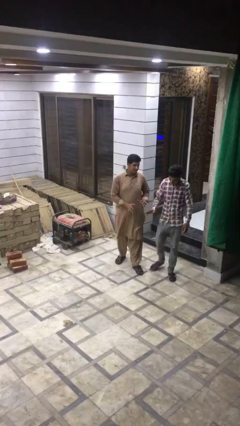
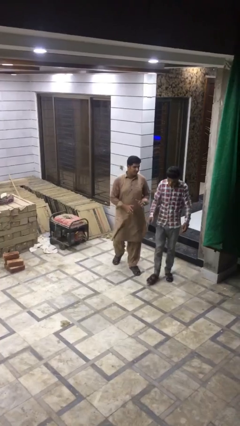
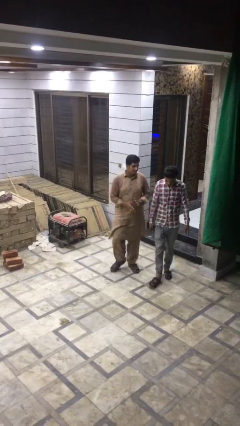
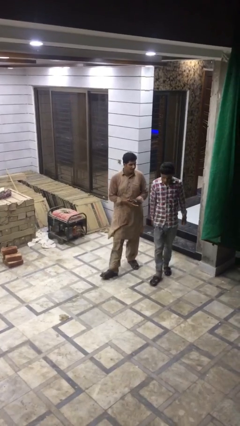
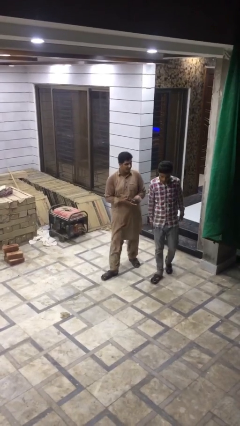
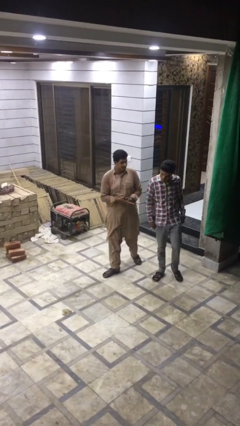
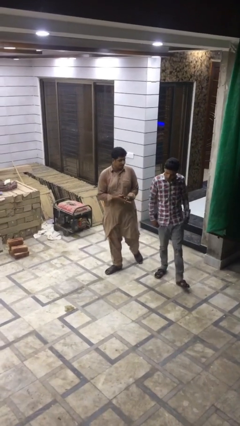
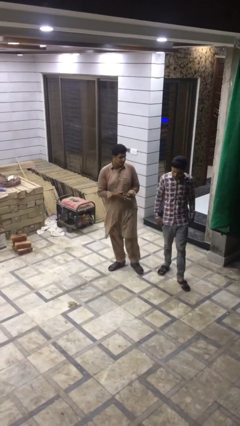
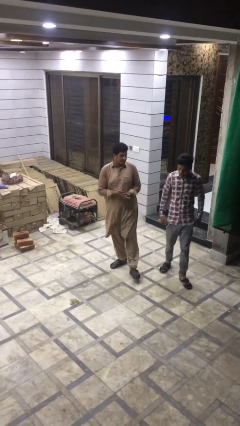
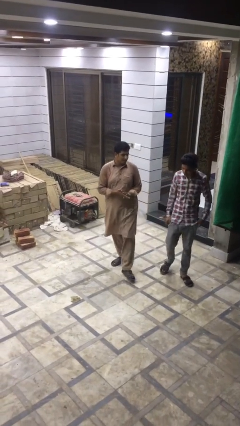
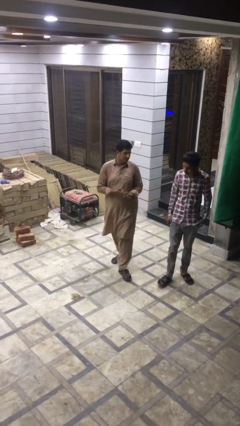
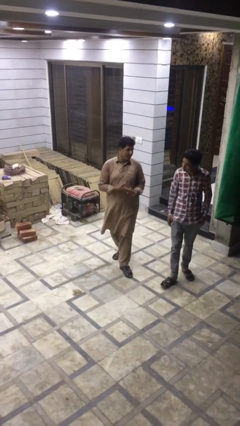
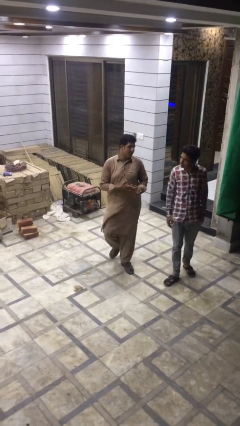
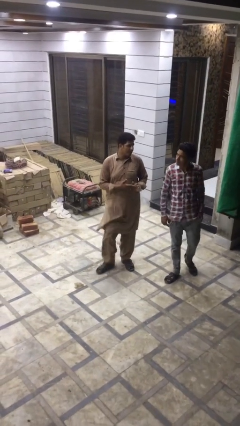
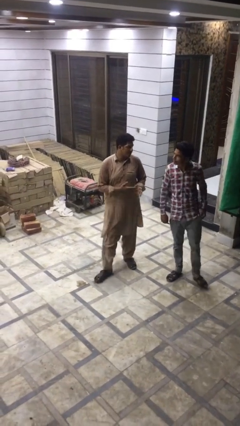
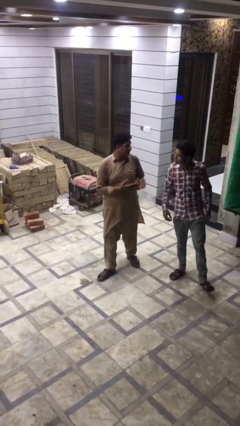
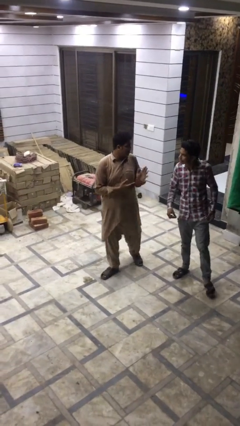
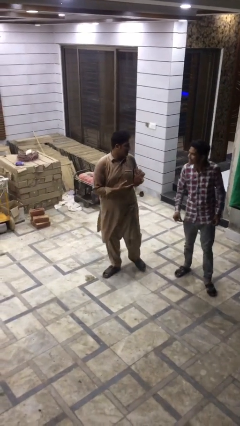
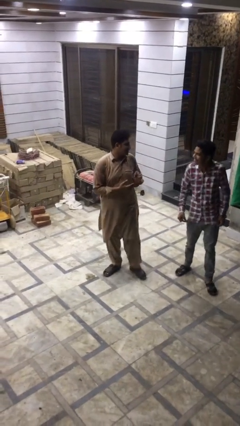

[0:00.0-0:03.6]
person talks to person

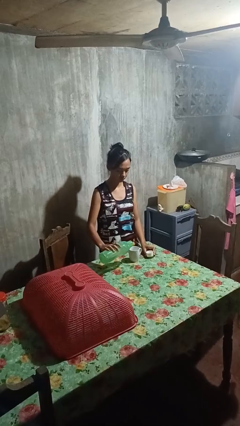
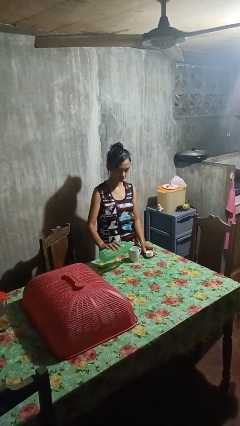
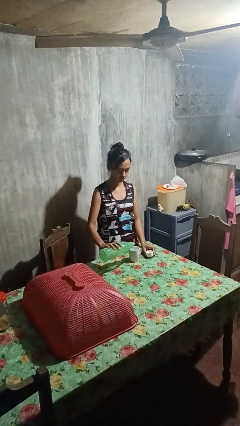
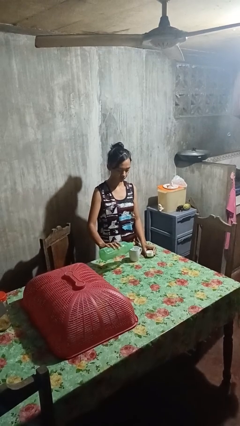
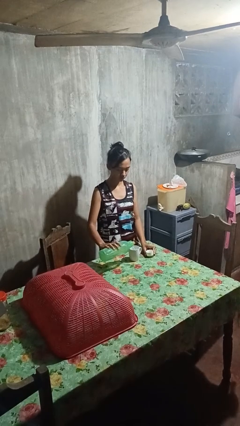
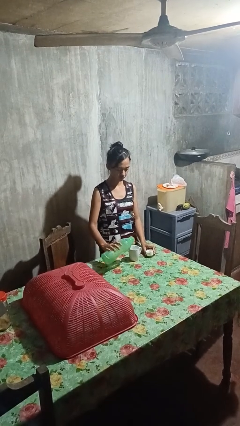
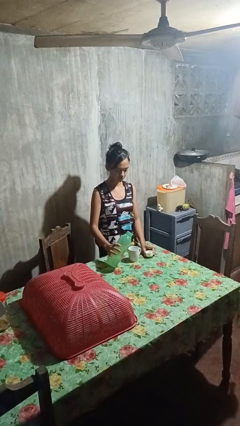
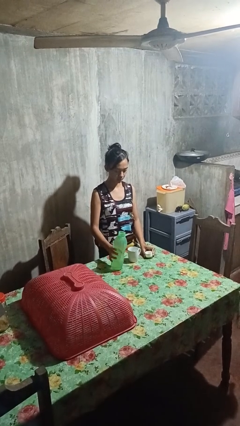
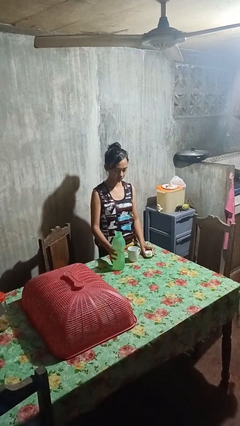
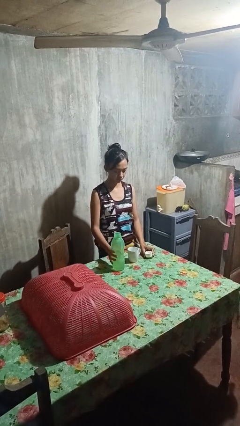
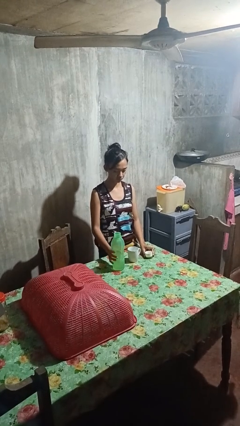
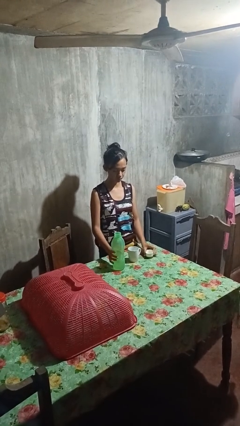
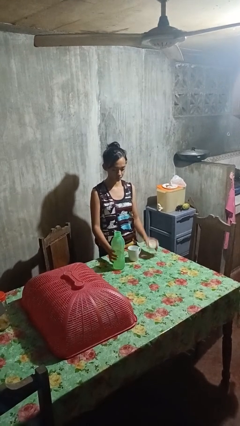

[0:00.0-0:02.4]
person pours liquid into cup

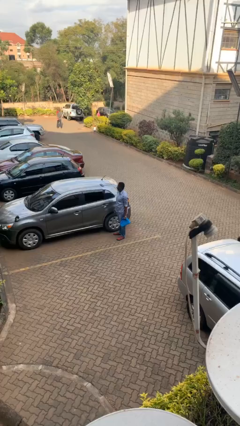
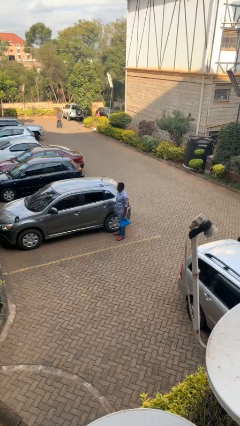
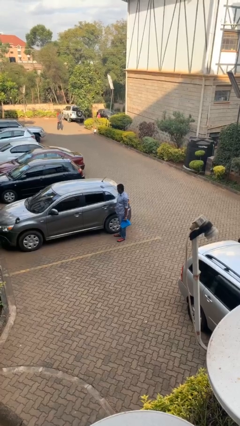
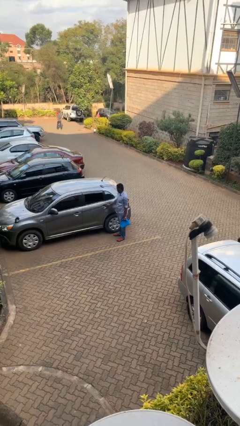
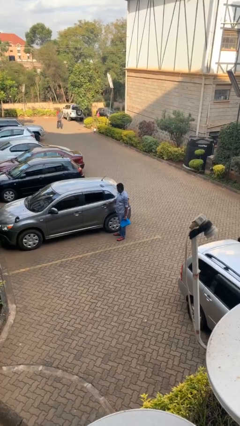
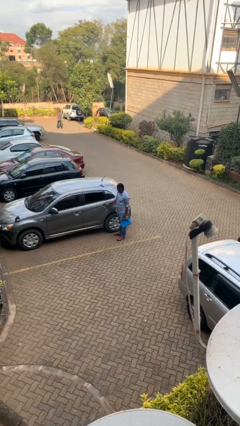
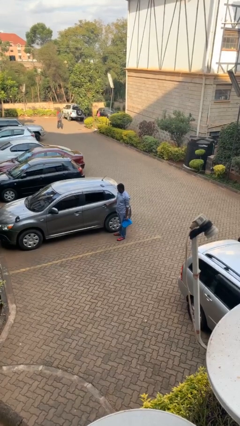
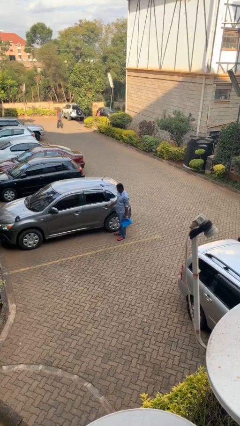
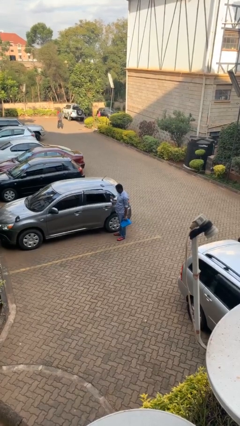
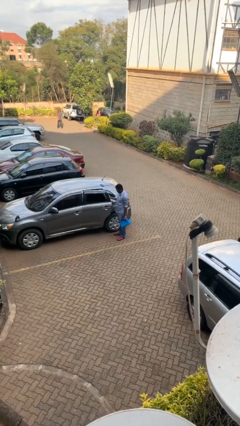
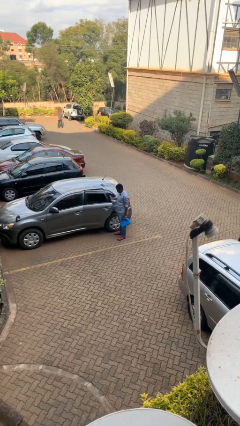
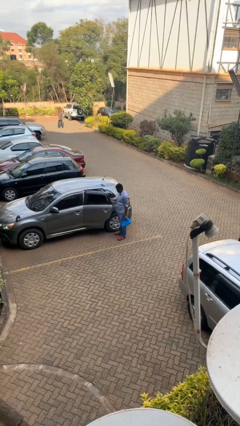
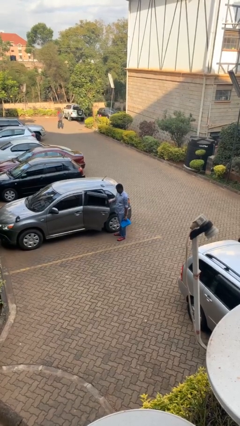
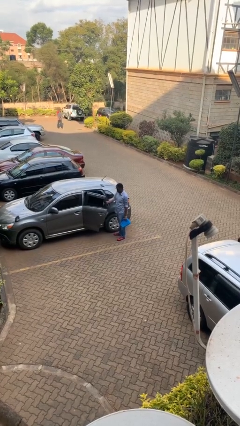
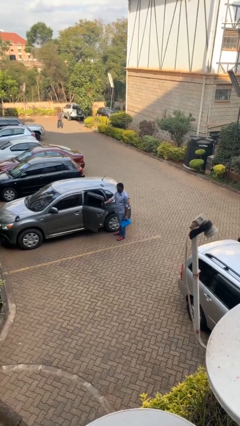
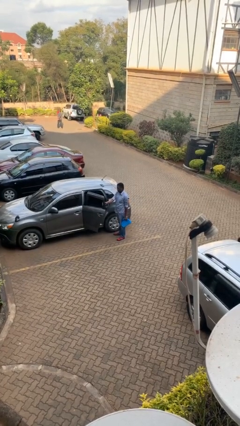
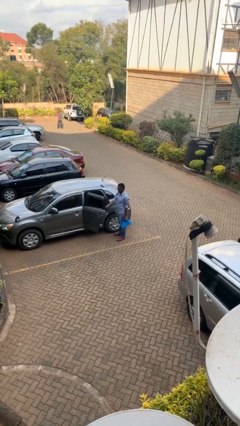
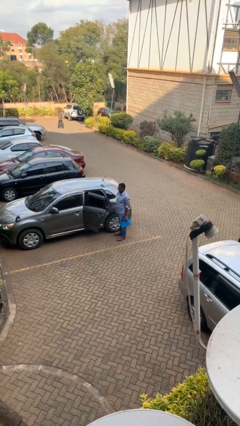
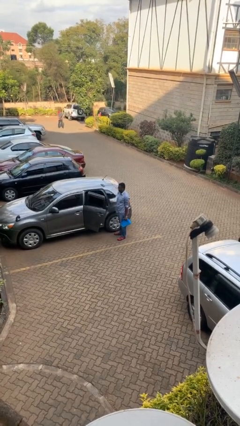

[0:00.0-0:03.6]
person opens car door

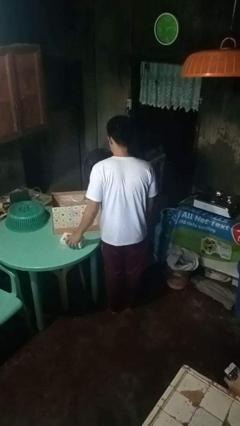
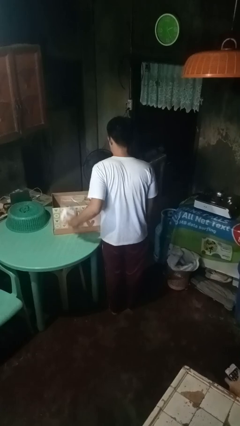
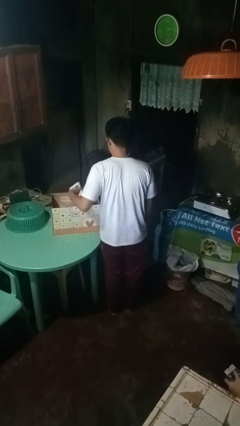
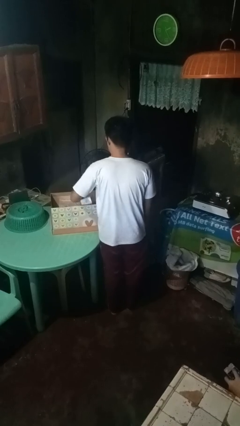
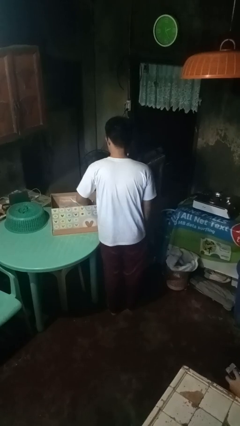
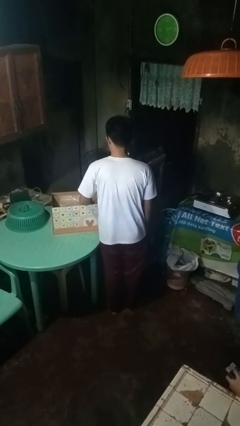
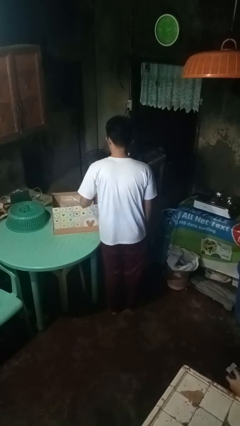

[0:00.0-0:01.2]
person puts object into box

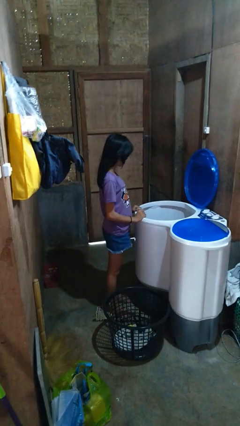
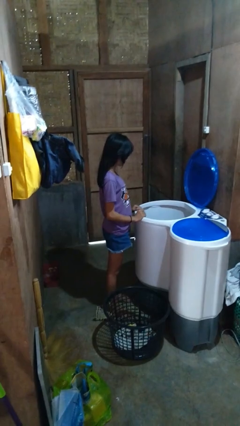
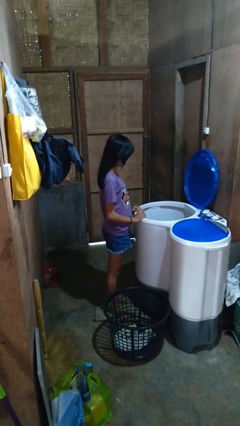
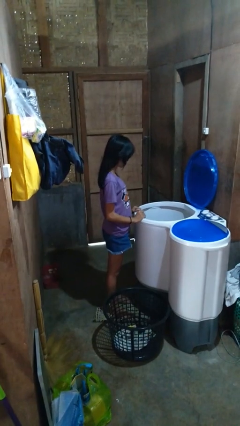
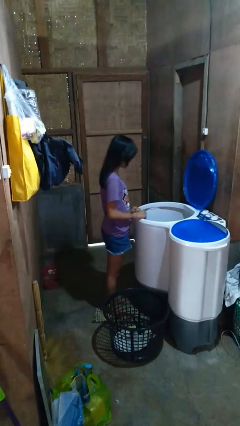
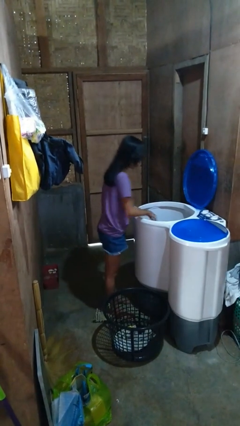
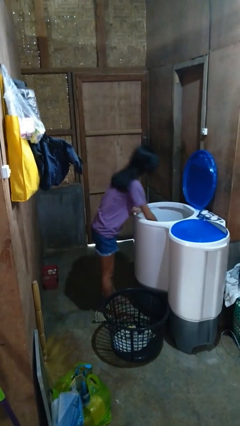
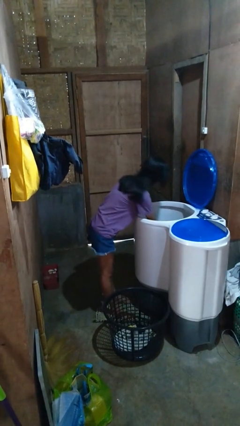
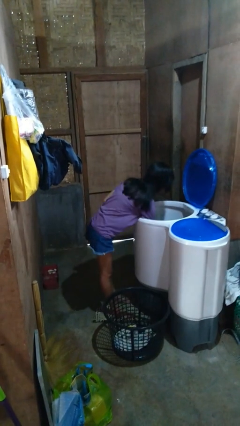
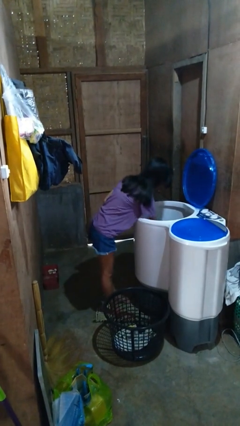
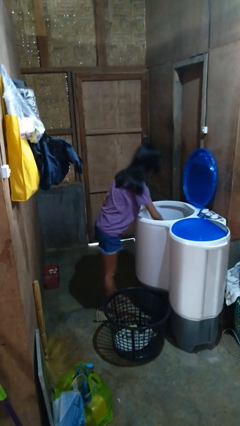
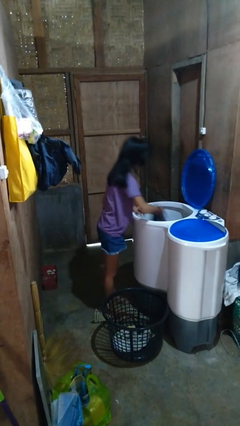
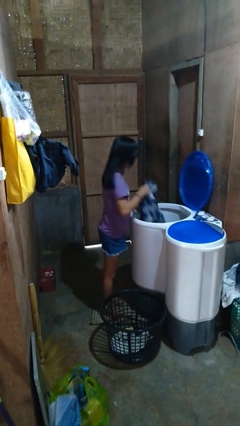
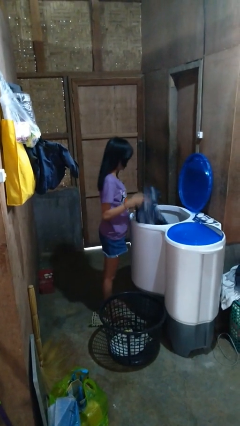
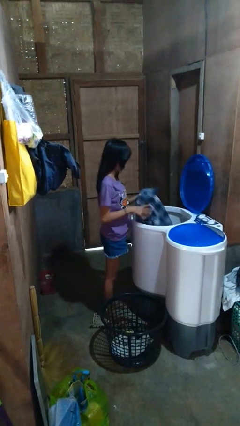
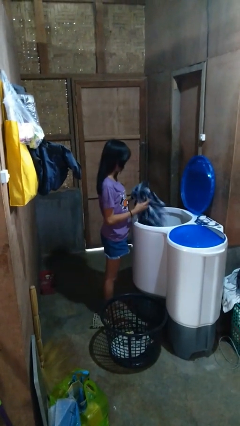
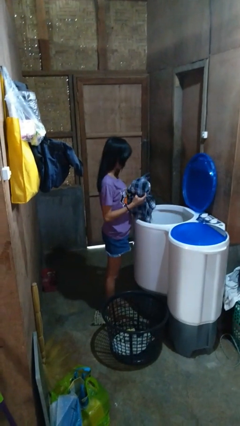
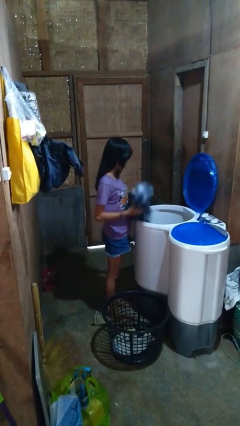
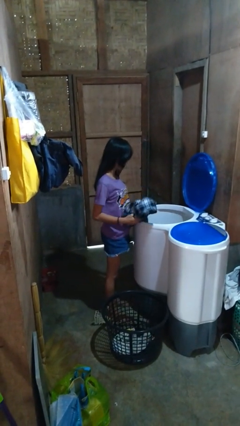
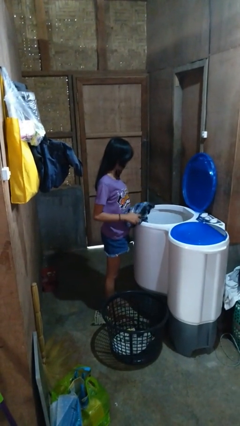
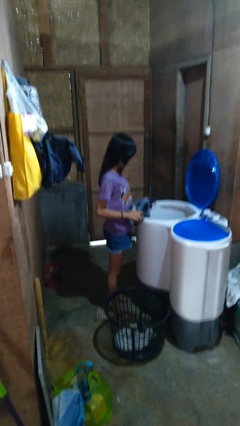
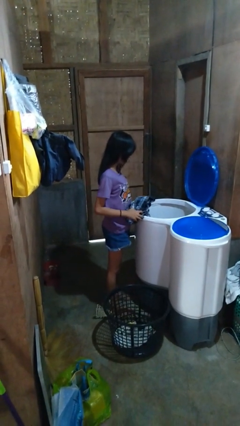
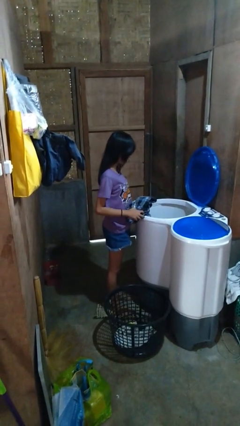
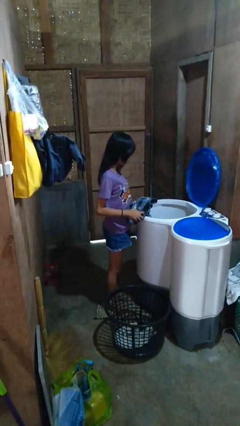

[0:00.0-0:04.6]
person loads clotheswasher

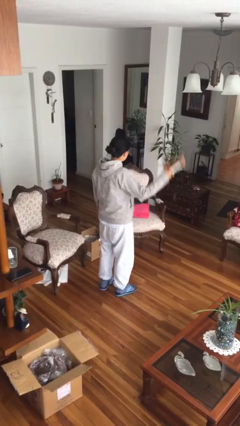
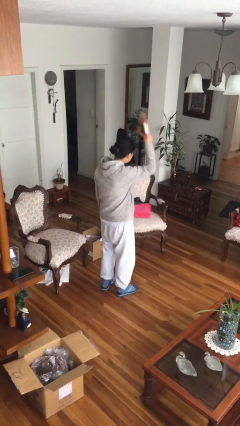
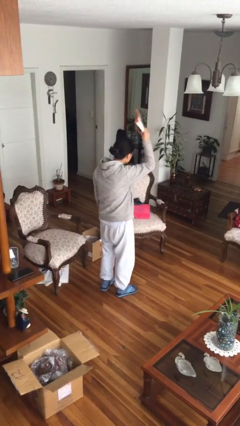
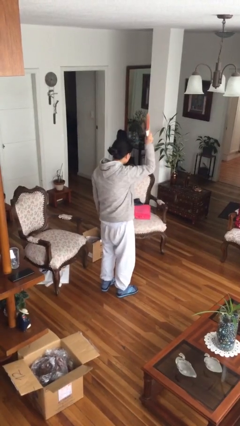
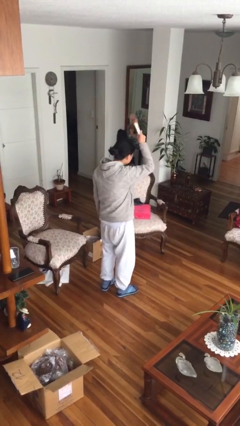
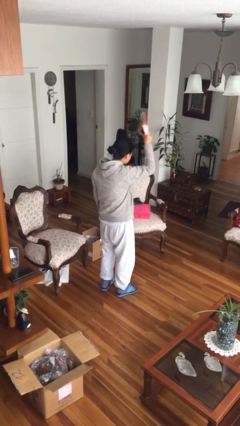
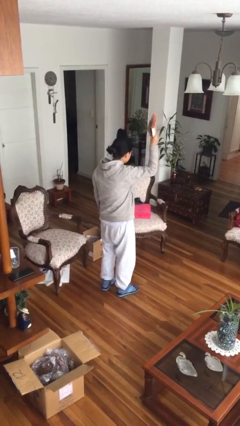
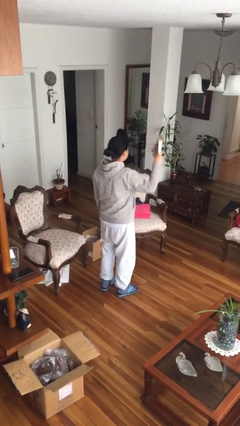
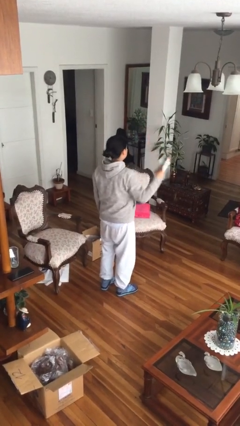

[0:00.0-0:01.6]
person holds object above head
